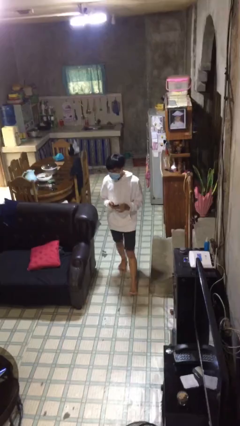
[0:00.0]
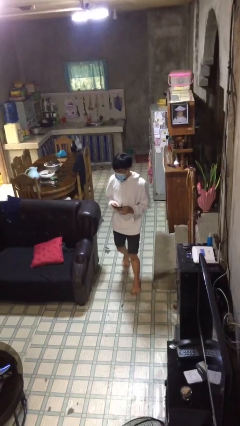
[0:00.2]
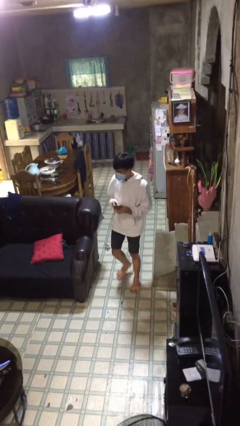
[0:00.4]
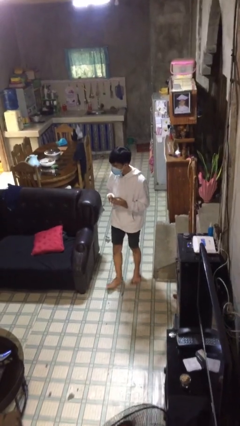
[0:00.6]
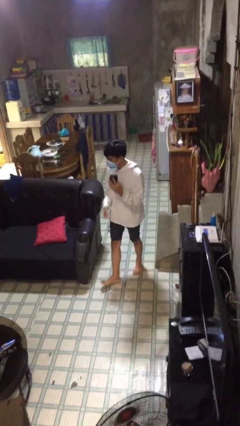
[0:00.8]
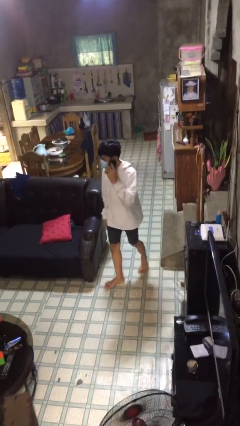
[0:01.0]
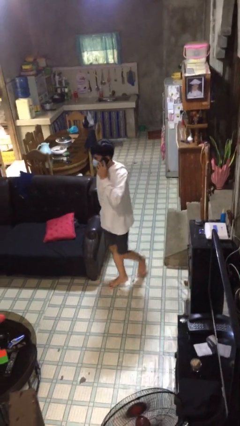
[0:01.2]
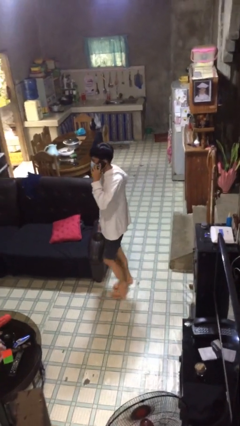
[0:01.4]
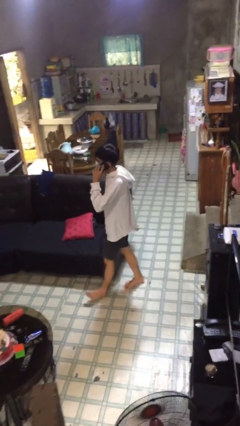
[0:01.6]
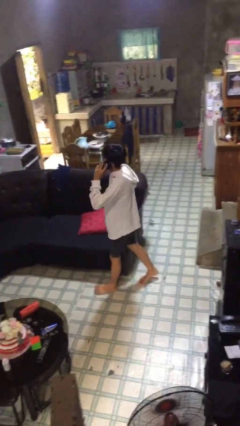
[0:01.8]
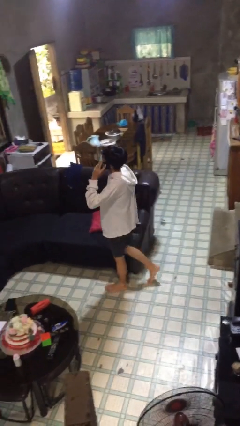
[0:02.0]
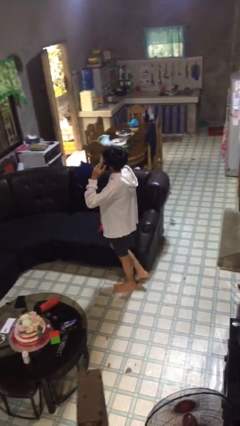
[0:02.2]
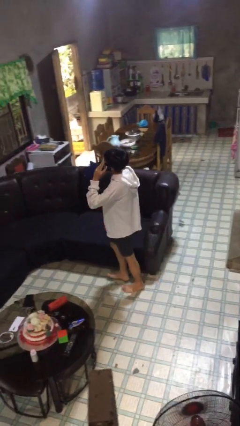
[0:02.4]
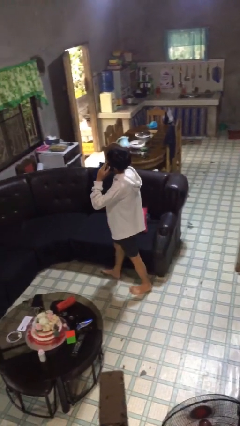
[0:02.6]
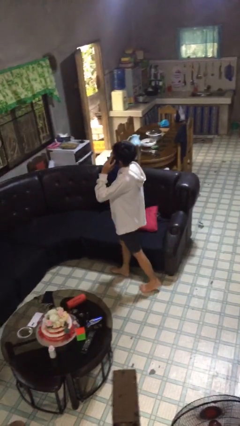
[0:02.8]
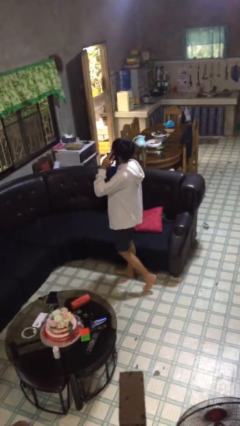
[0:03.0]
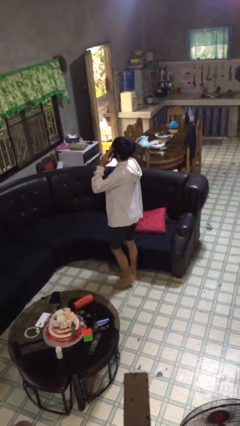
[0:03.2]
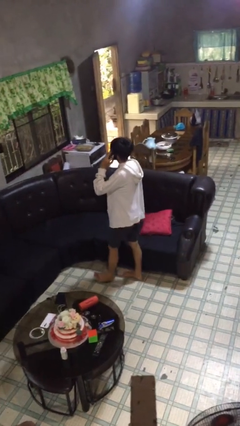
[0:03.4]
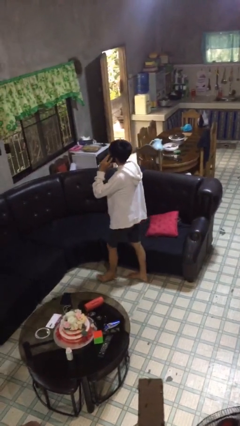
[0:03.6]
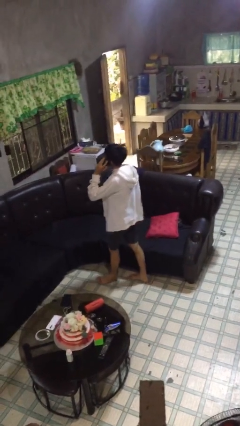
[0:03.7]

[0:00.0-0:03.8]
person talks on phone

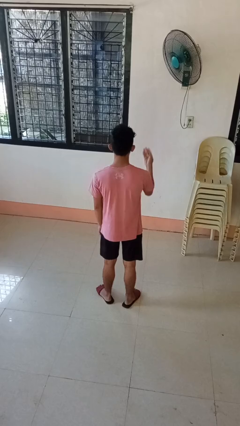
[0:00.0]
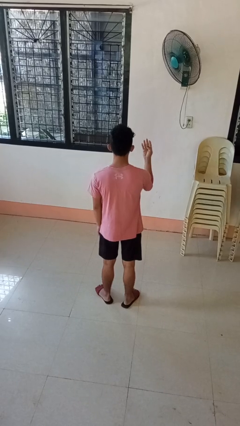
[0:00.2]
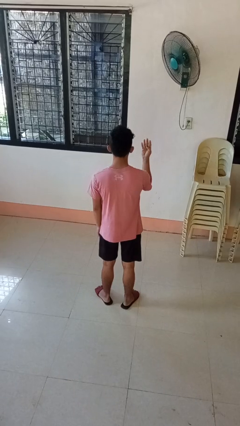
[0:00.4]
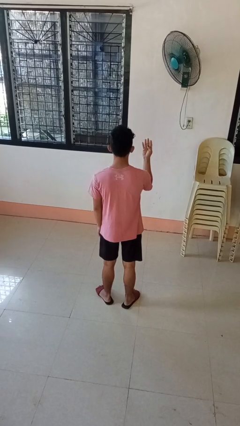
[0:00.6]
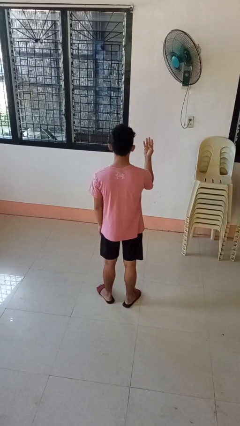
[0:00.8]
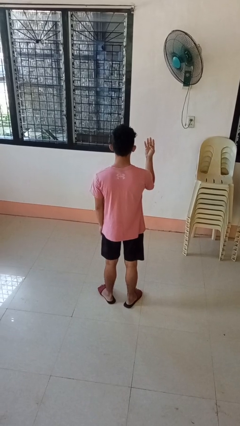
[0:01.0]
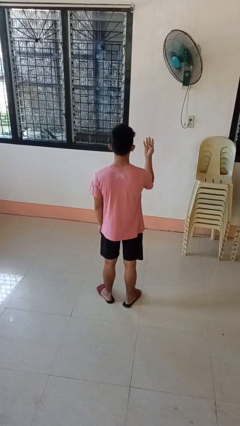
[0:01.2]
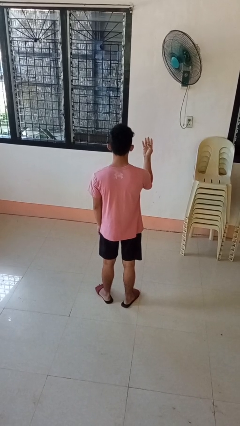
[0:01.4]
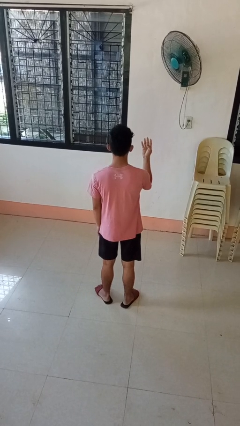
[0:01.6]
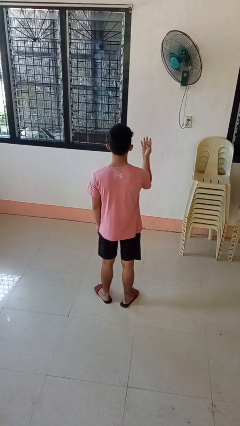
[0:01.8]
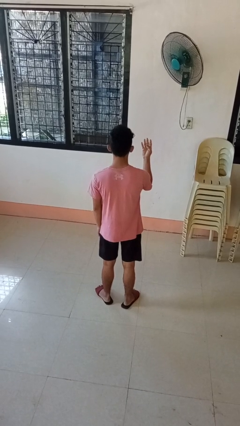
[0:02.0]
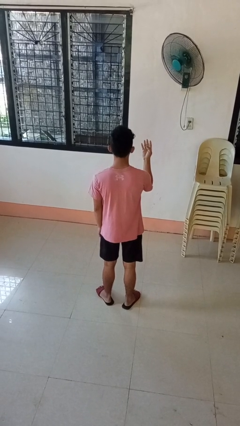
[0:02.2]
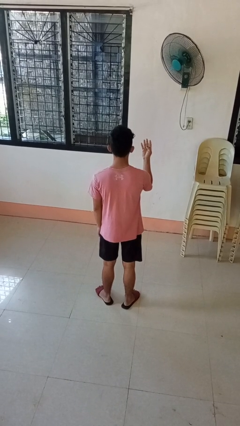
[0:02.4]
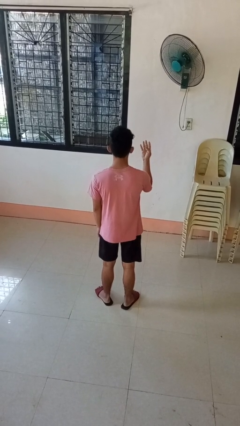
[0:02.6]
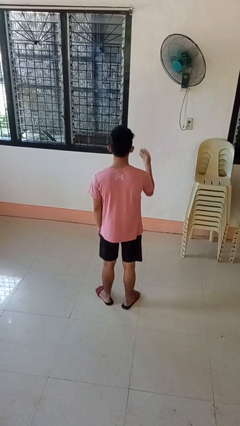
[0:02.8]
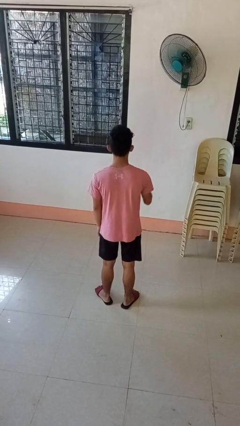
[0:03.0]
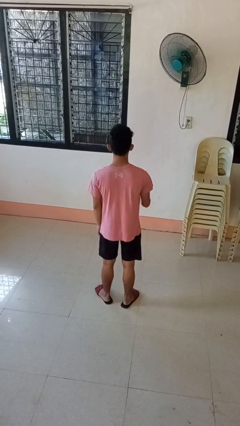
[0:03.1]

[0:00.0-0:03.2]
person gestures number four

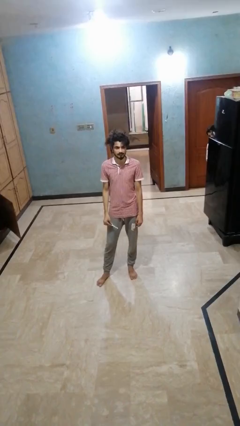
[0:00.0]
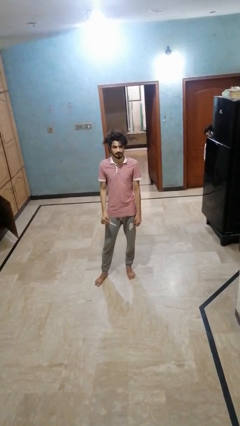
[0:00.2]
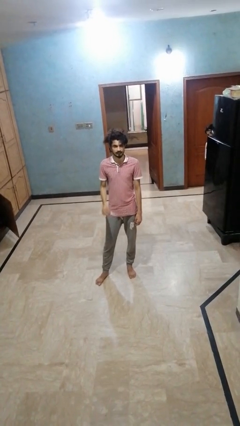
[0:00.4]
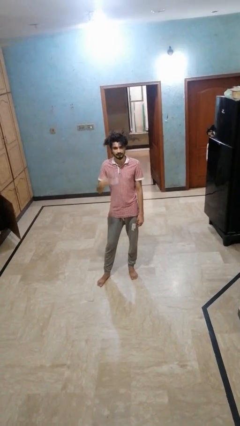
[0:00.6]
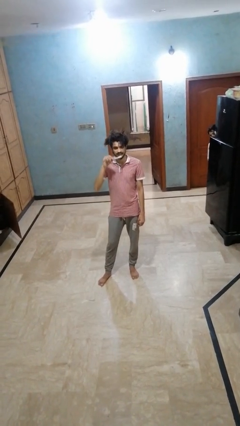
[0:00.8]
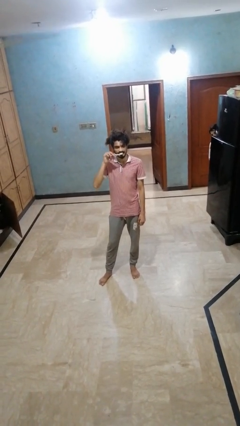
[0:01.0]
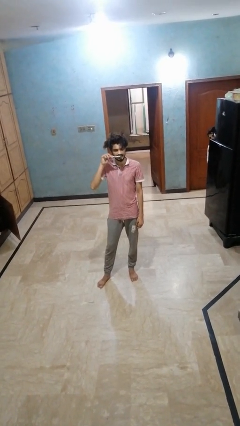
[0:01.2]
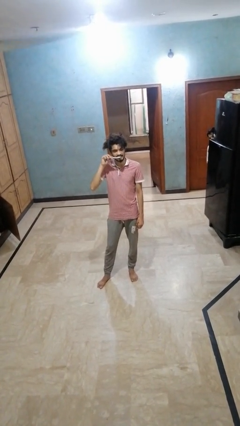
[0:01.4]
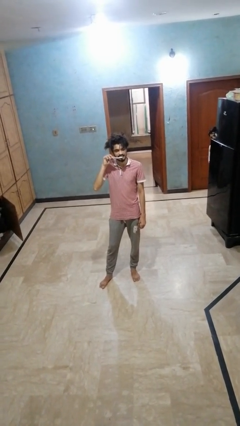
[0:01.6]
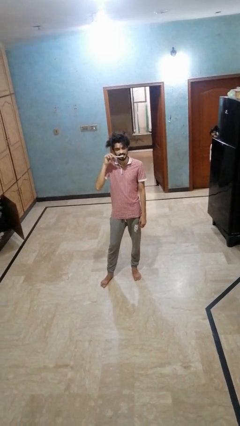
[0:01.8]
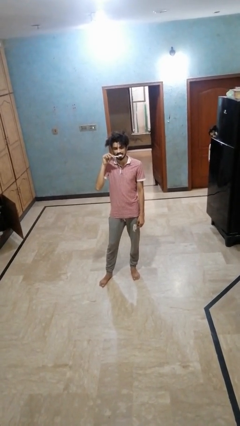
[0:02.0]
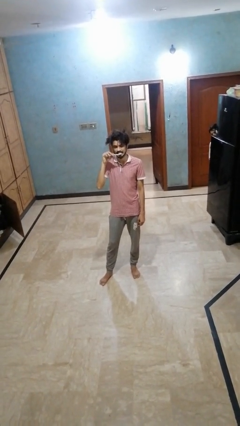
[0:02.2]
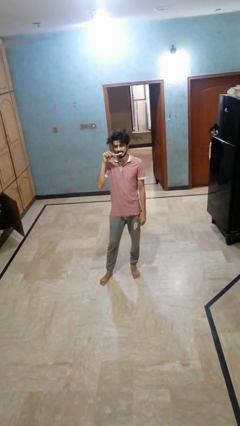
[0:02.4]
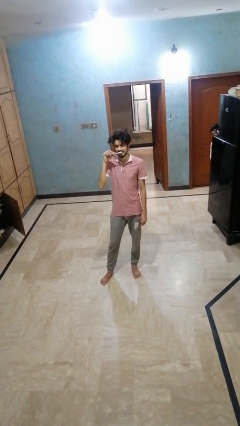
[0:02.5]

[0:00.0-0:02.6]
person brushes teeth

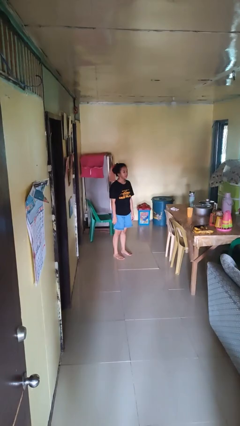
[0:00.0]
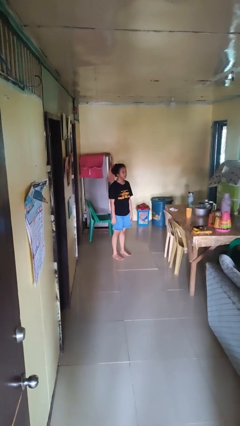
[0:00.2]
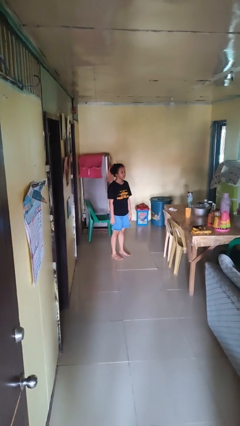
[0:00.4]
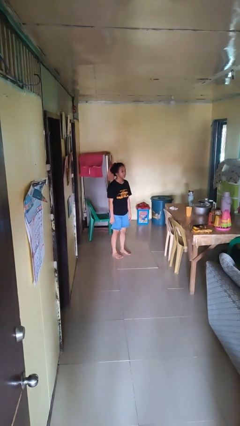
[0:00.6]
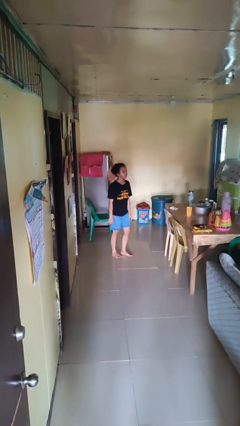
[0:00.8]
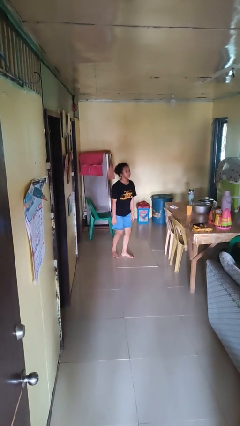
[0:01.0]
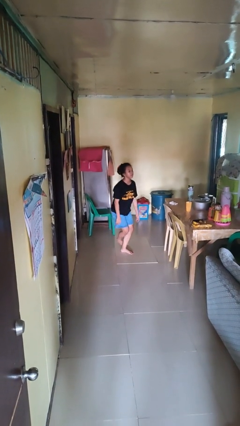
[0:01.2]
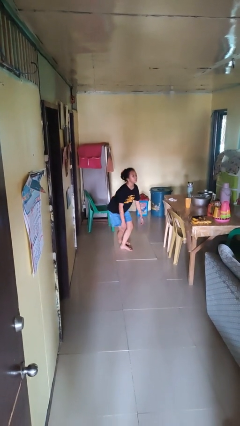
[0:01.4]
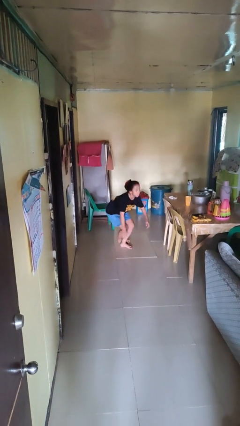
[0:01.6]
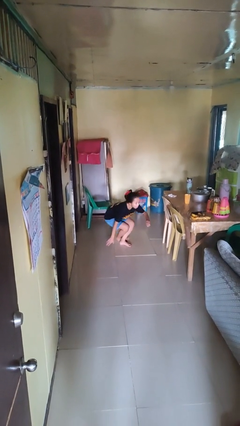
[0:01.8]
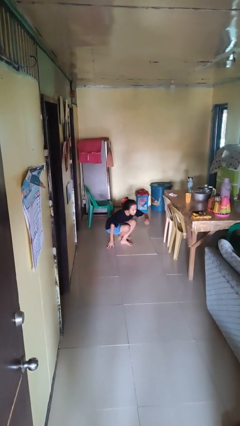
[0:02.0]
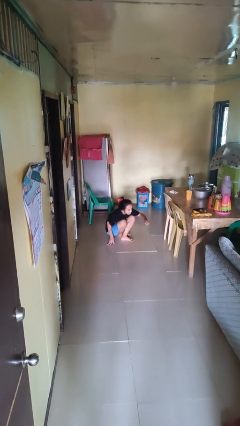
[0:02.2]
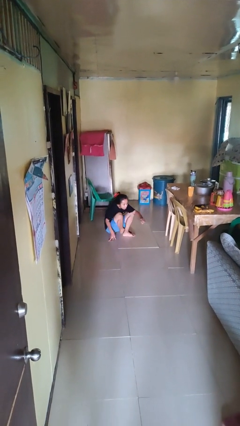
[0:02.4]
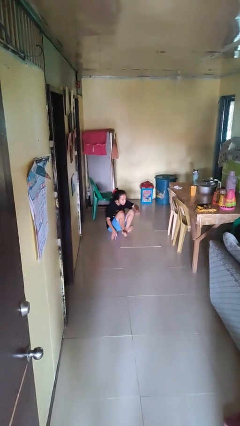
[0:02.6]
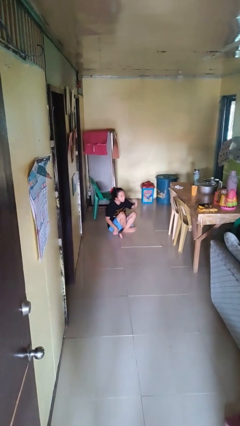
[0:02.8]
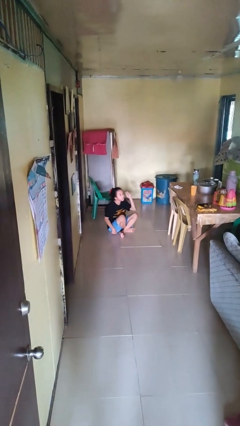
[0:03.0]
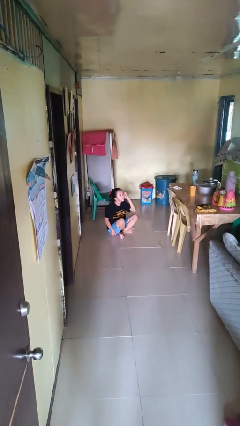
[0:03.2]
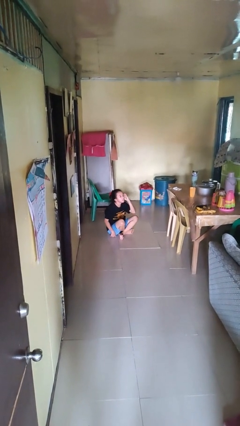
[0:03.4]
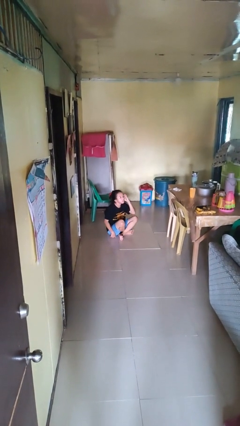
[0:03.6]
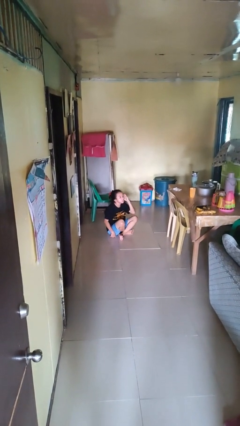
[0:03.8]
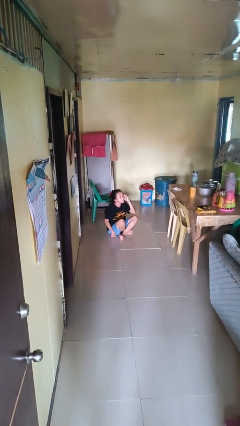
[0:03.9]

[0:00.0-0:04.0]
person sits crisscross

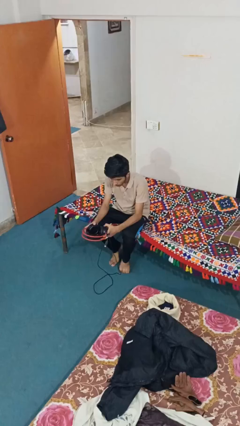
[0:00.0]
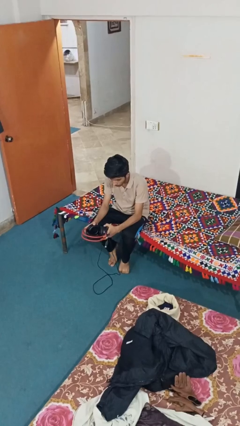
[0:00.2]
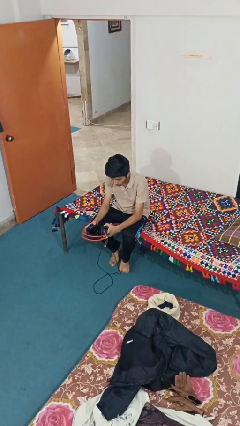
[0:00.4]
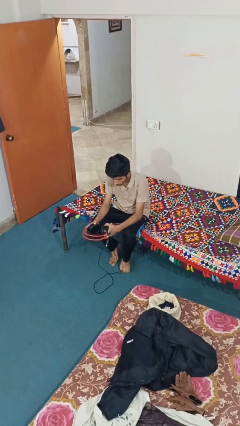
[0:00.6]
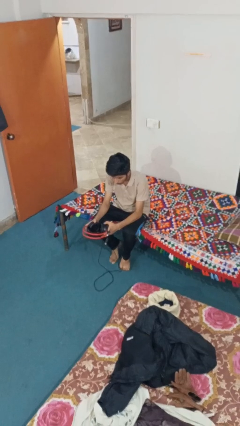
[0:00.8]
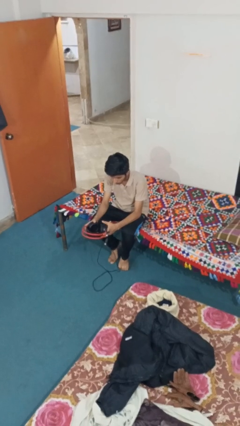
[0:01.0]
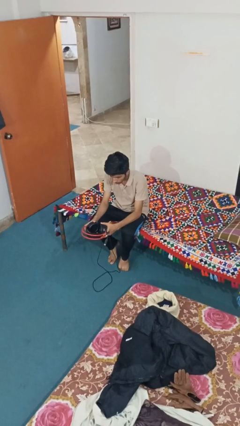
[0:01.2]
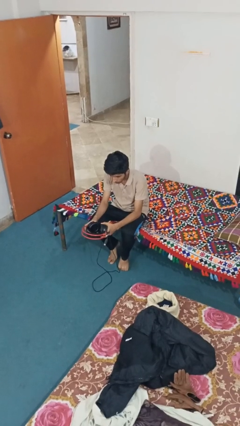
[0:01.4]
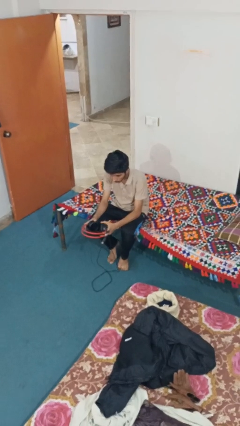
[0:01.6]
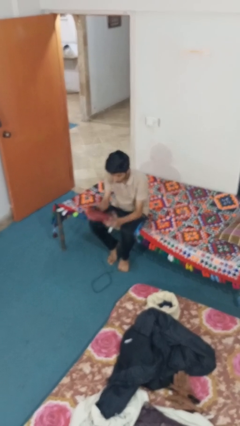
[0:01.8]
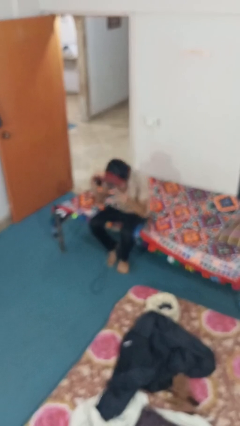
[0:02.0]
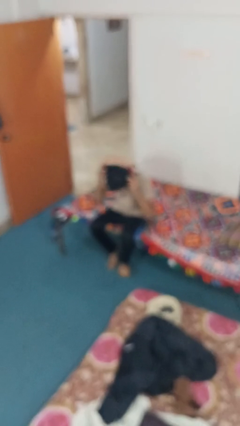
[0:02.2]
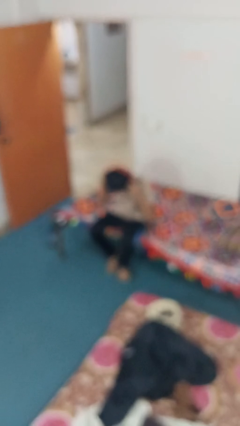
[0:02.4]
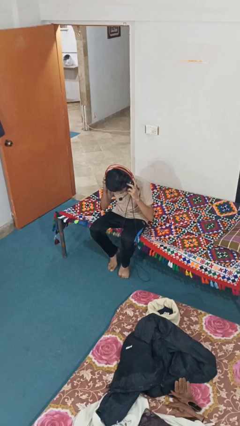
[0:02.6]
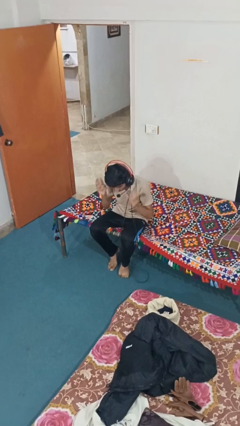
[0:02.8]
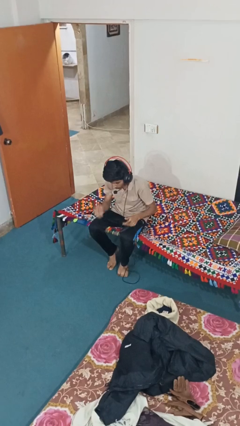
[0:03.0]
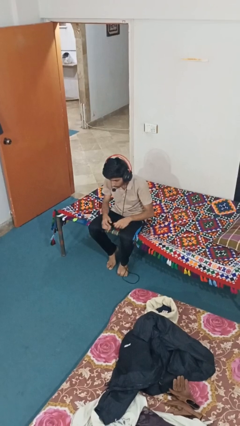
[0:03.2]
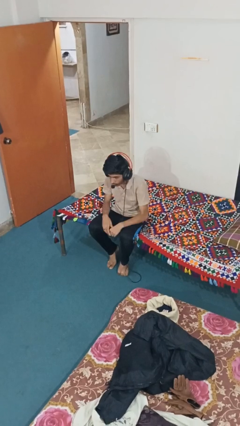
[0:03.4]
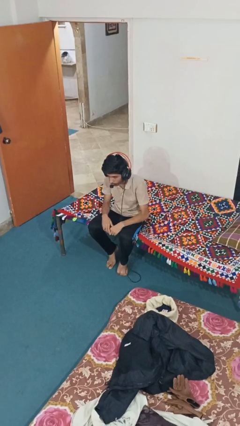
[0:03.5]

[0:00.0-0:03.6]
person puts on headphones

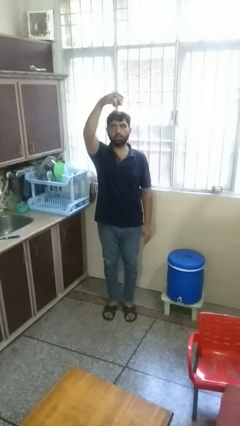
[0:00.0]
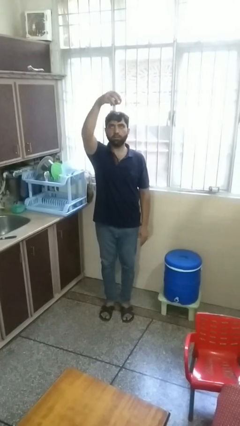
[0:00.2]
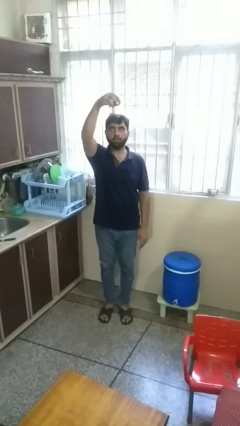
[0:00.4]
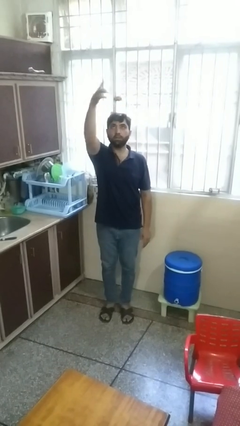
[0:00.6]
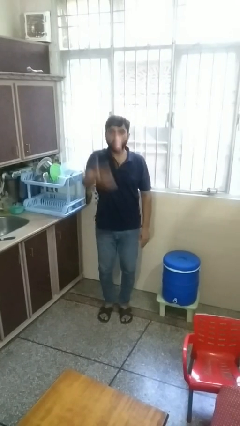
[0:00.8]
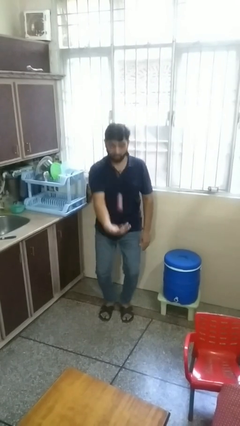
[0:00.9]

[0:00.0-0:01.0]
person drops object
